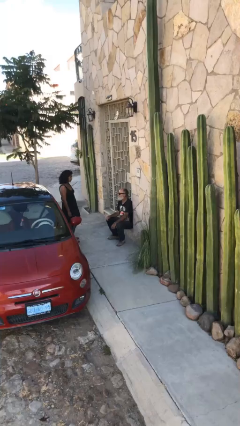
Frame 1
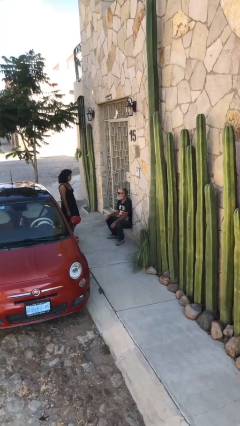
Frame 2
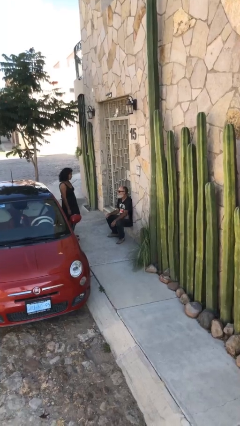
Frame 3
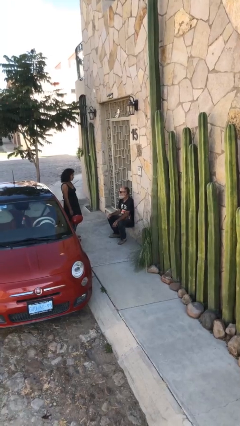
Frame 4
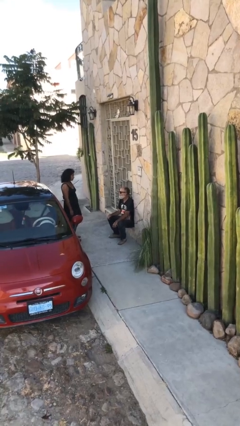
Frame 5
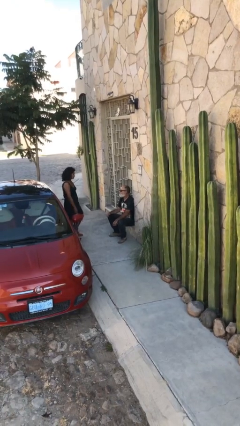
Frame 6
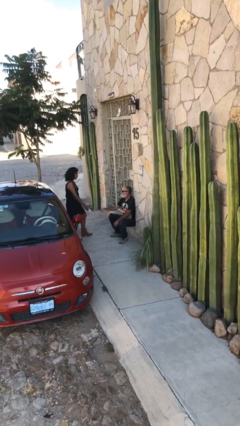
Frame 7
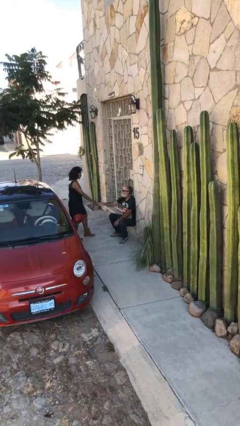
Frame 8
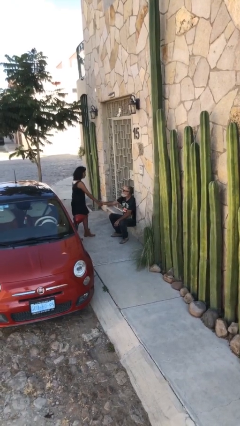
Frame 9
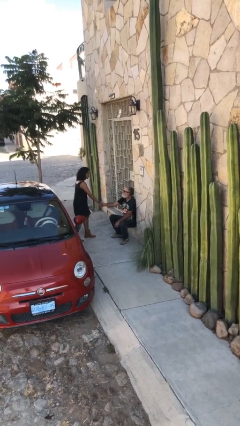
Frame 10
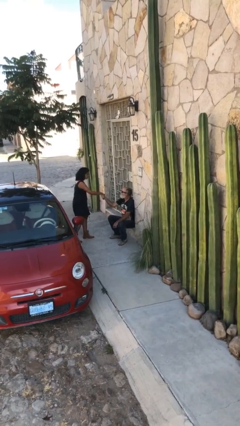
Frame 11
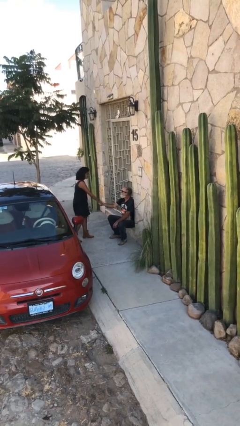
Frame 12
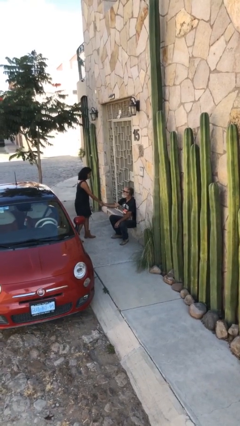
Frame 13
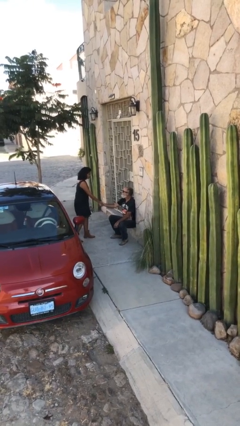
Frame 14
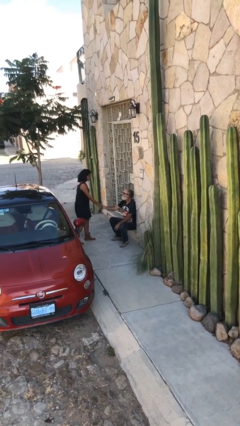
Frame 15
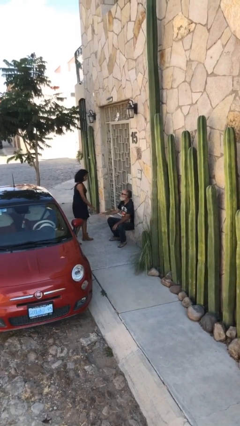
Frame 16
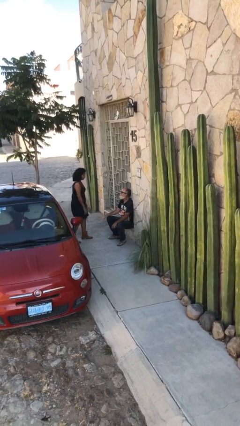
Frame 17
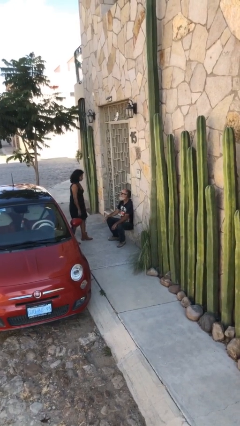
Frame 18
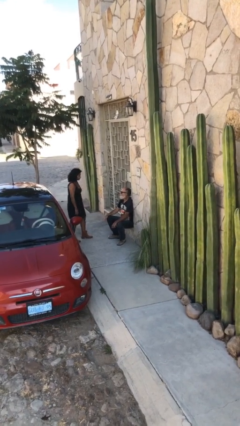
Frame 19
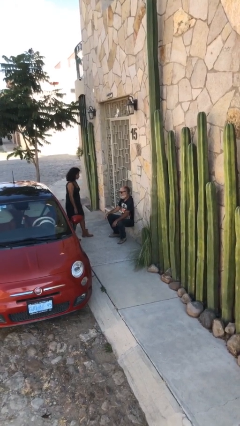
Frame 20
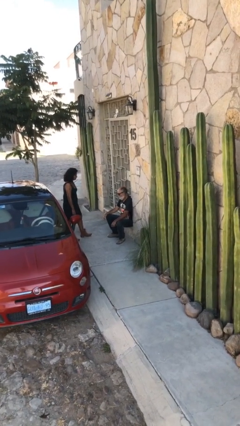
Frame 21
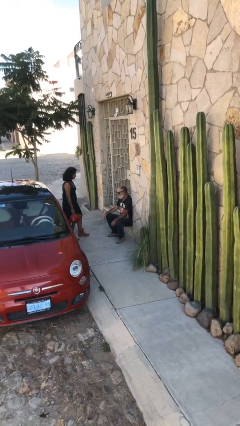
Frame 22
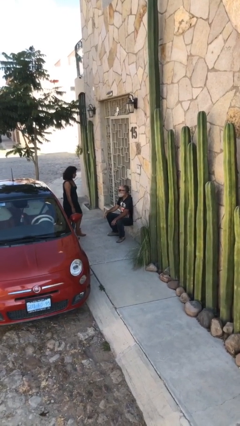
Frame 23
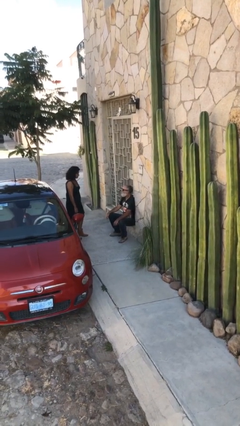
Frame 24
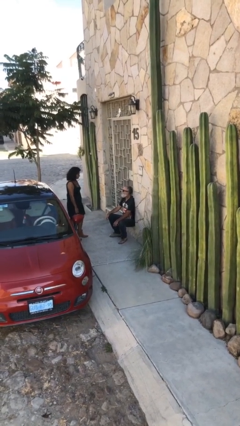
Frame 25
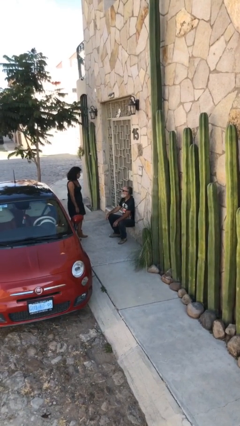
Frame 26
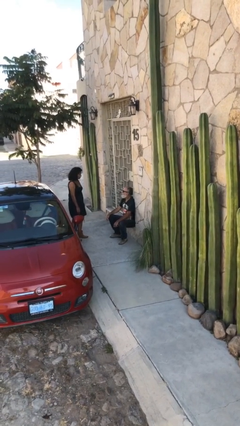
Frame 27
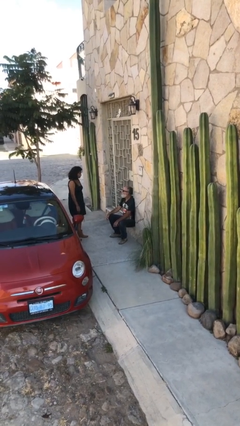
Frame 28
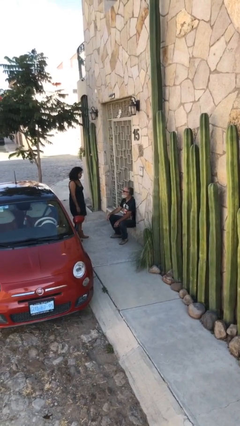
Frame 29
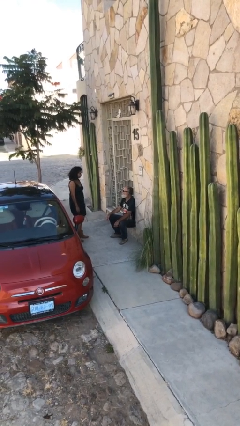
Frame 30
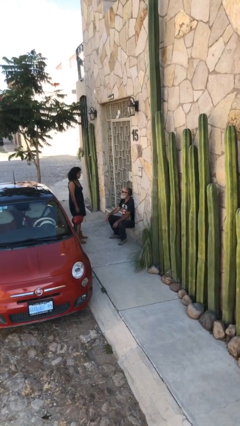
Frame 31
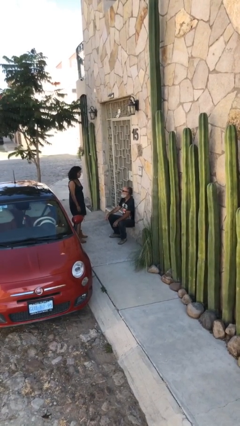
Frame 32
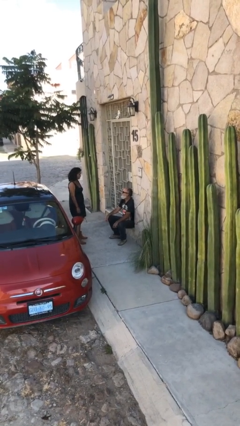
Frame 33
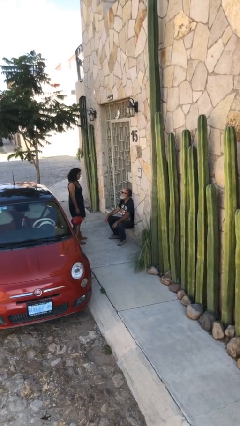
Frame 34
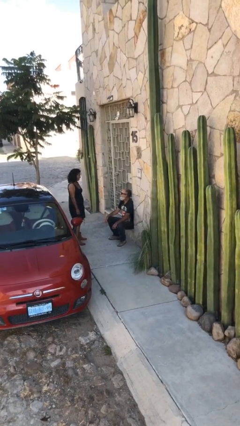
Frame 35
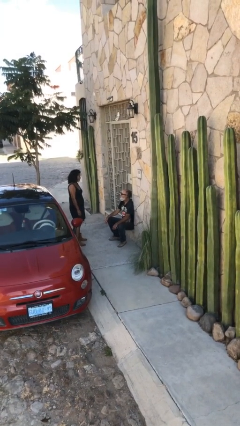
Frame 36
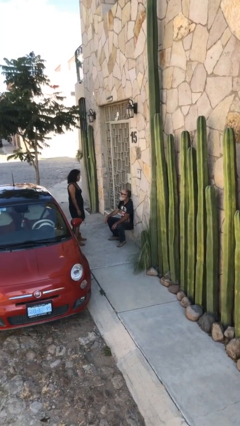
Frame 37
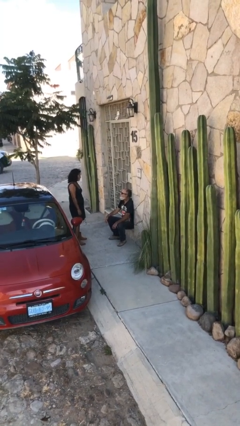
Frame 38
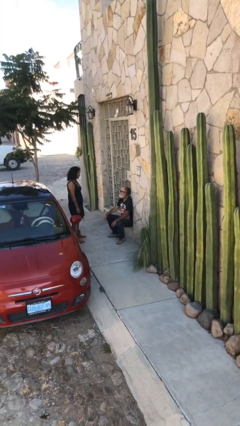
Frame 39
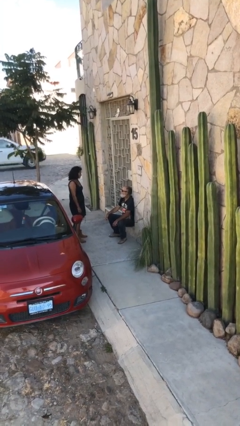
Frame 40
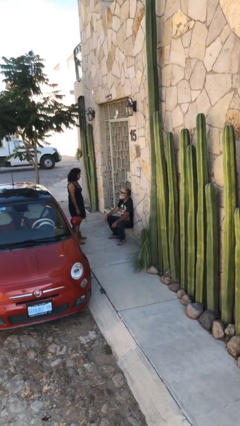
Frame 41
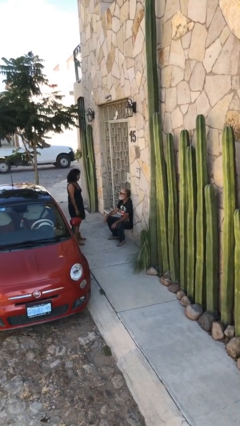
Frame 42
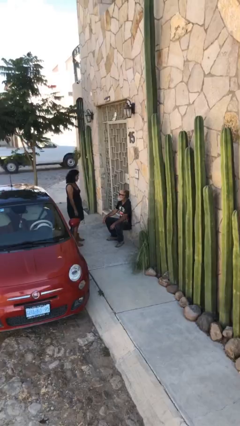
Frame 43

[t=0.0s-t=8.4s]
person shakes hand

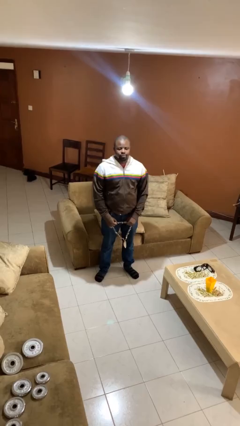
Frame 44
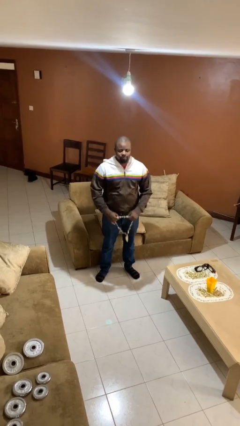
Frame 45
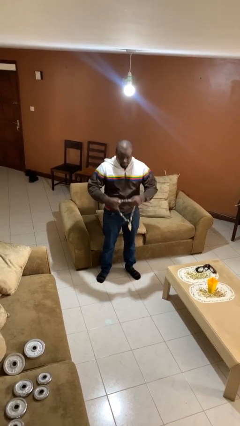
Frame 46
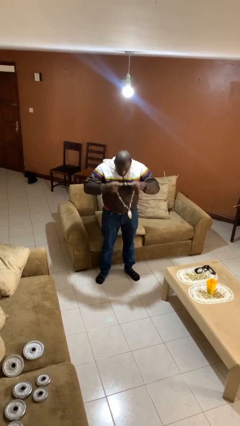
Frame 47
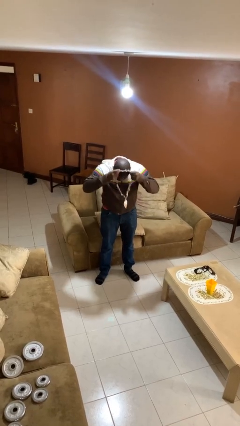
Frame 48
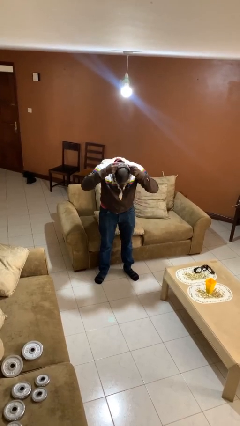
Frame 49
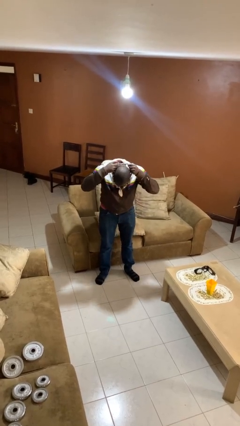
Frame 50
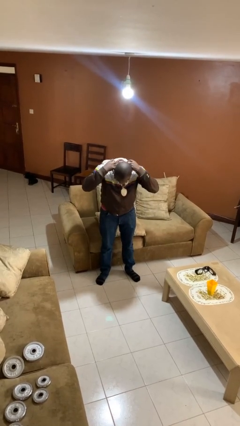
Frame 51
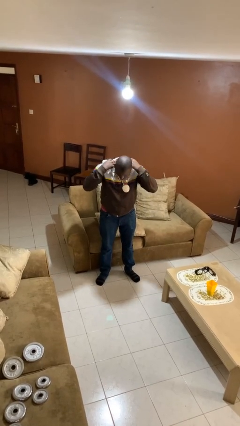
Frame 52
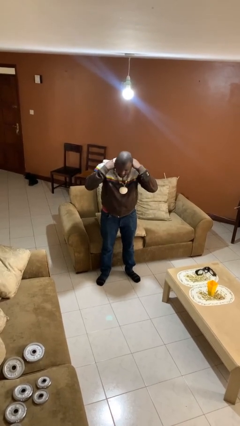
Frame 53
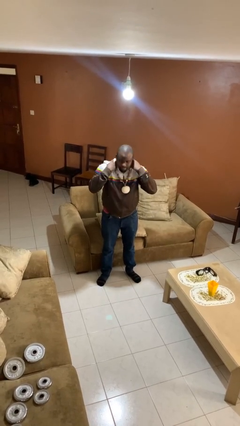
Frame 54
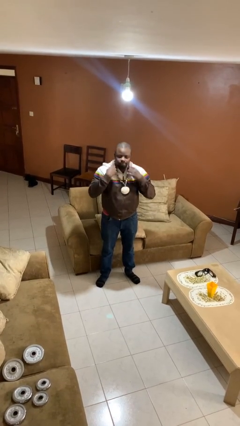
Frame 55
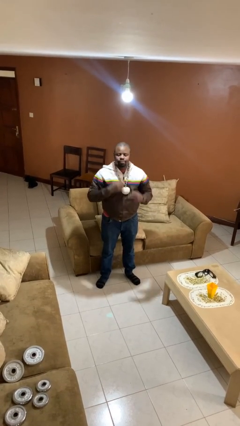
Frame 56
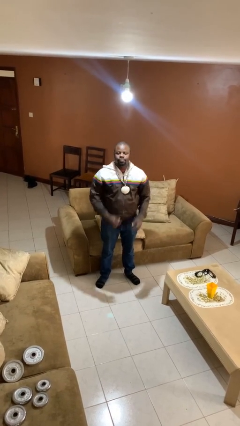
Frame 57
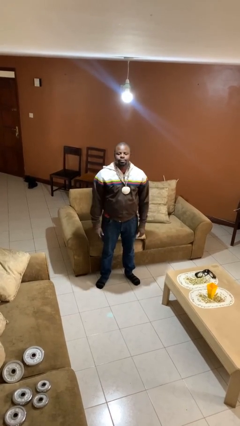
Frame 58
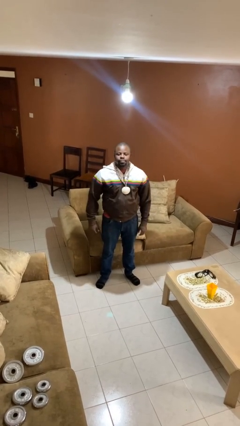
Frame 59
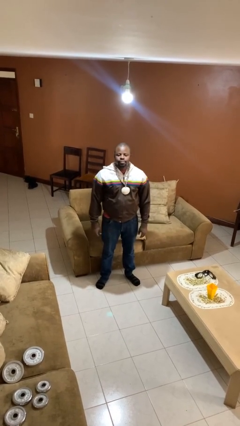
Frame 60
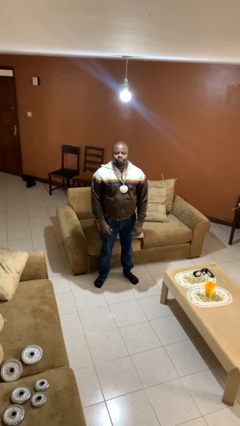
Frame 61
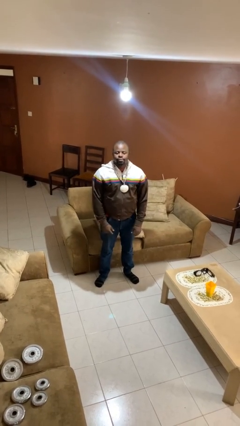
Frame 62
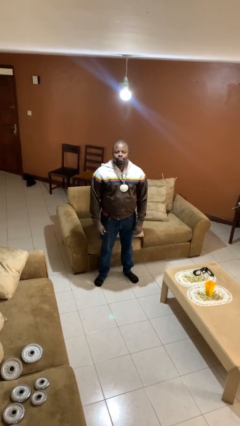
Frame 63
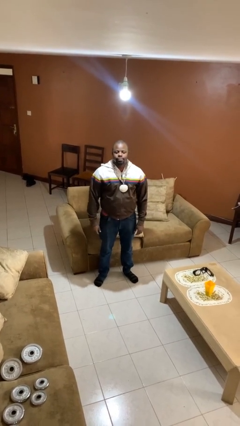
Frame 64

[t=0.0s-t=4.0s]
person puts on necklace

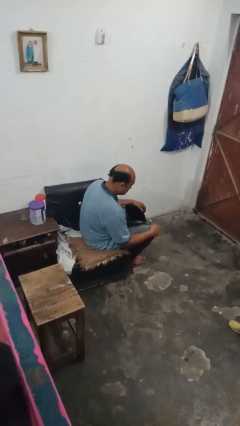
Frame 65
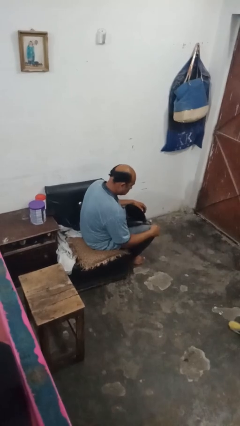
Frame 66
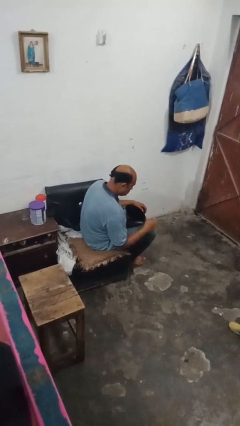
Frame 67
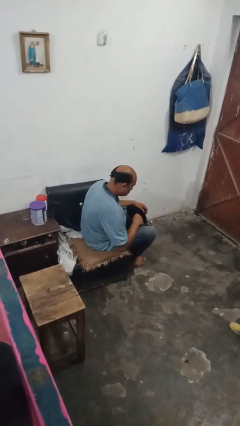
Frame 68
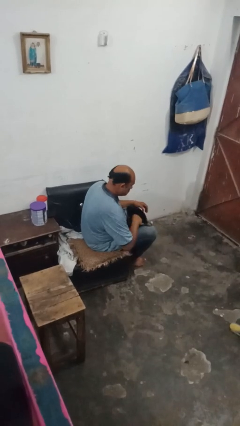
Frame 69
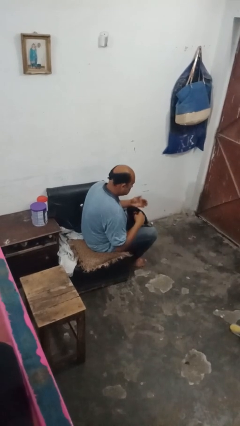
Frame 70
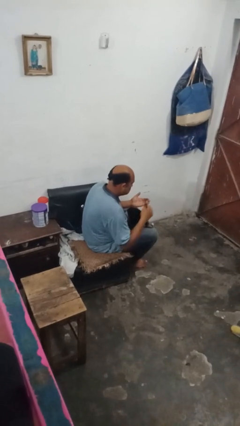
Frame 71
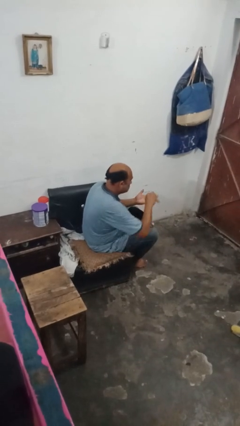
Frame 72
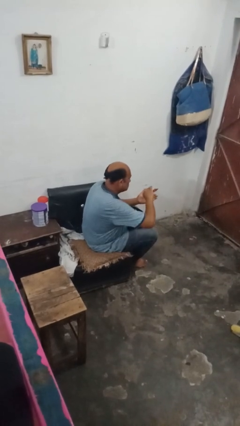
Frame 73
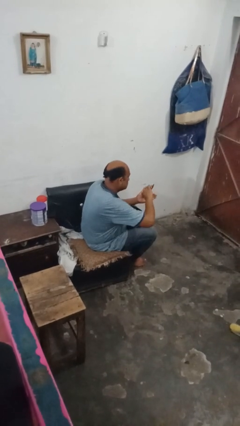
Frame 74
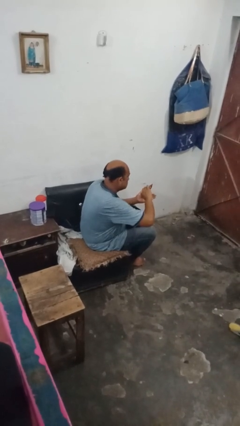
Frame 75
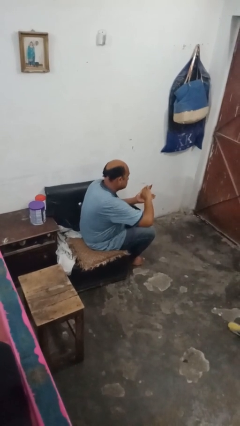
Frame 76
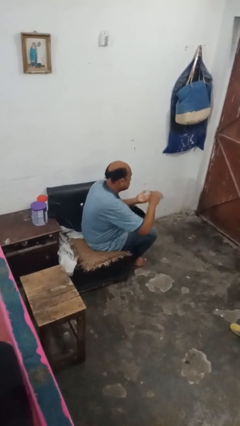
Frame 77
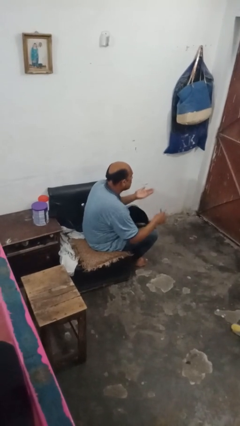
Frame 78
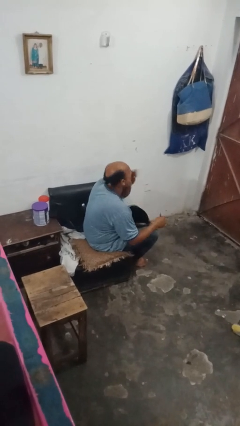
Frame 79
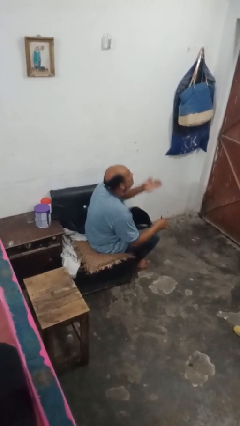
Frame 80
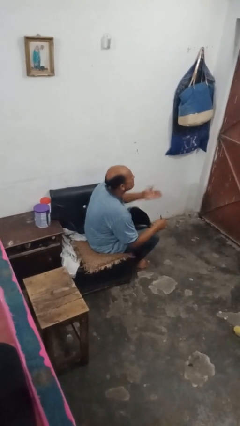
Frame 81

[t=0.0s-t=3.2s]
person eats snack from bag

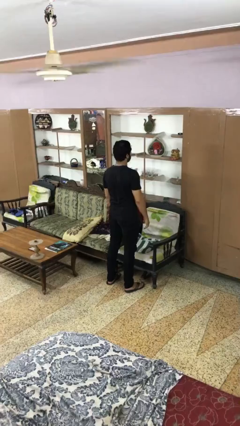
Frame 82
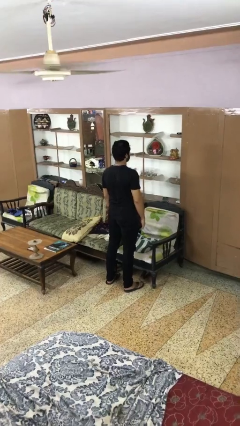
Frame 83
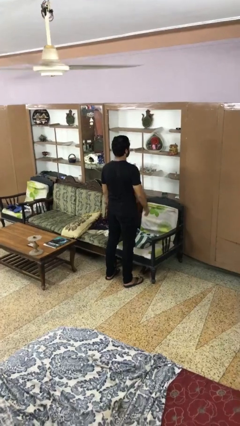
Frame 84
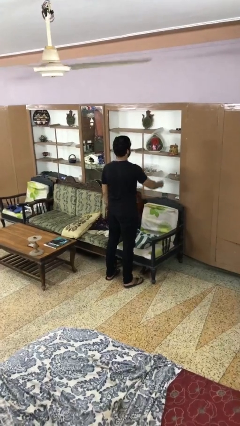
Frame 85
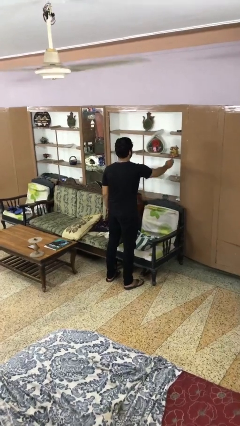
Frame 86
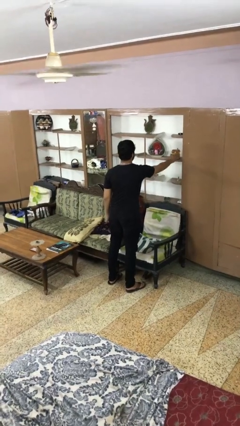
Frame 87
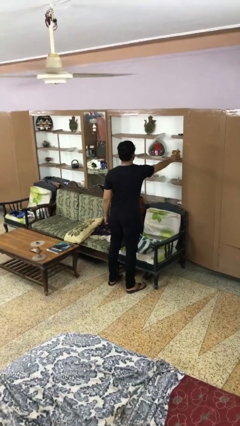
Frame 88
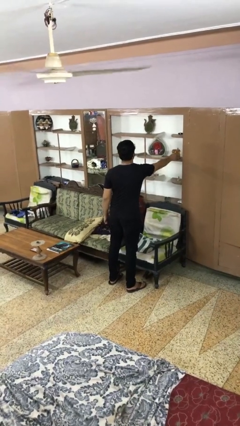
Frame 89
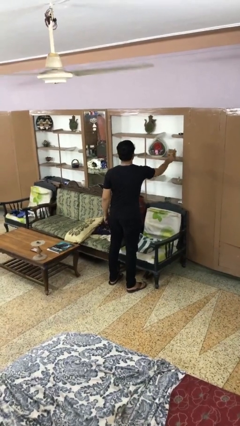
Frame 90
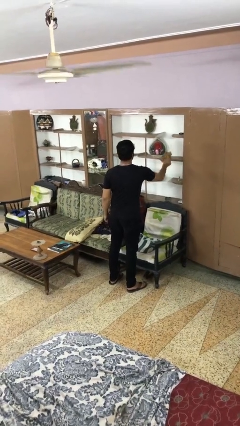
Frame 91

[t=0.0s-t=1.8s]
person picks up object from shelf

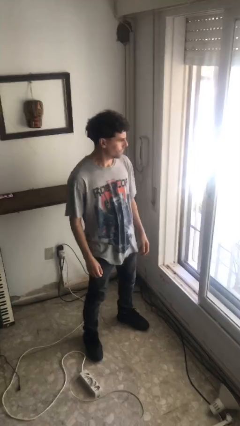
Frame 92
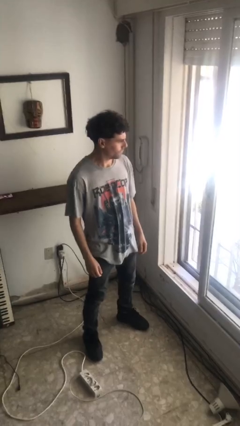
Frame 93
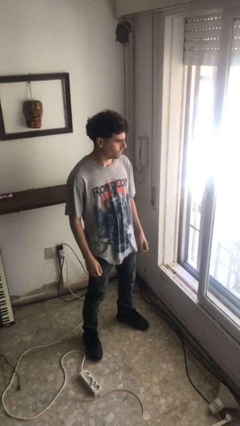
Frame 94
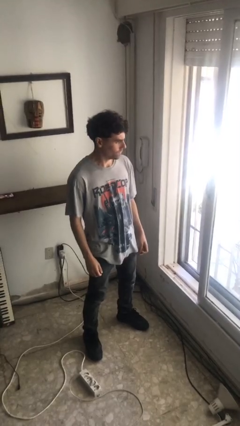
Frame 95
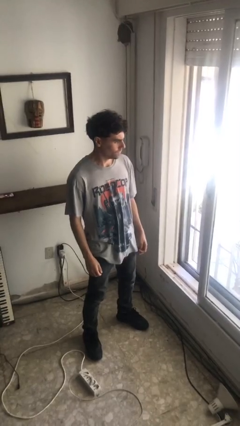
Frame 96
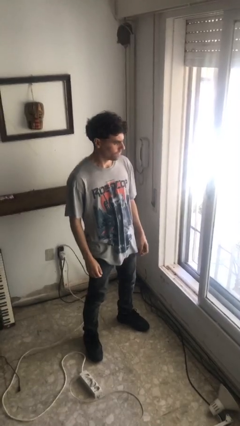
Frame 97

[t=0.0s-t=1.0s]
person untucks shirt
